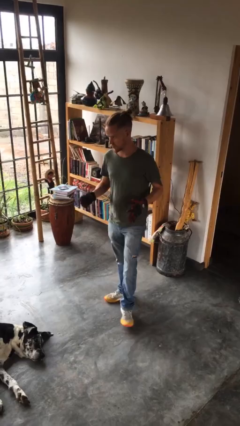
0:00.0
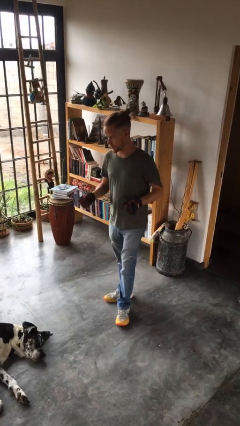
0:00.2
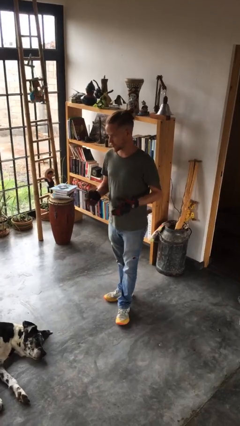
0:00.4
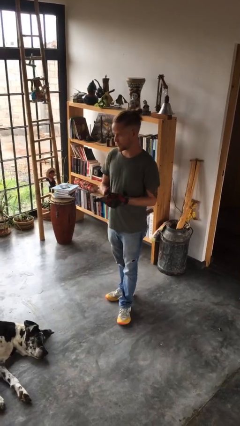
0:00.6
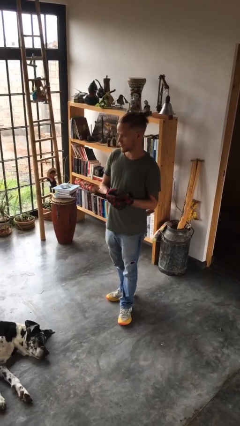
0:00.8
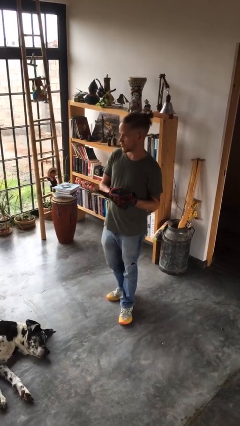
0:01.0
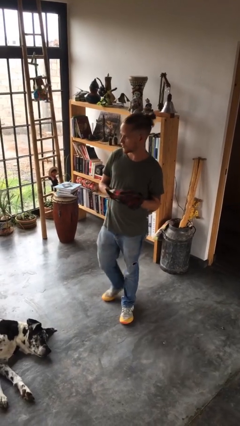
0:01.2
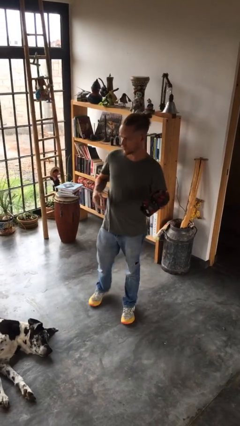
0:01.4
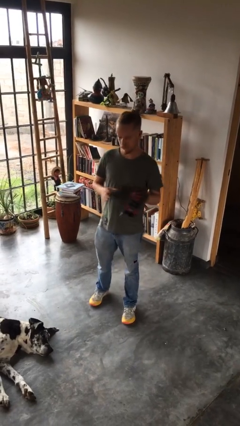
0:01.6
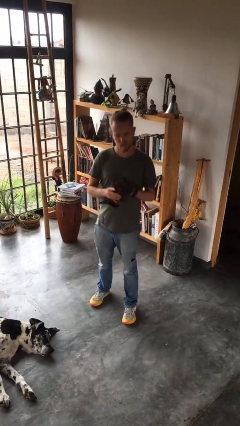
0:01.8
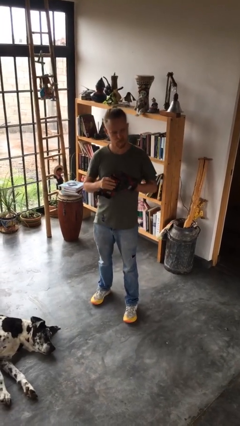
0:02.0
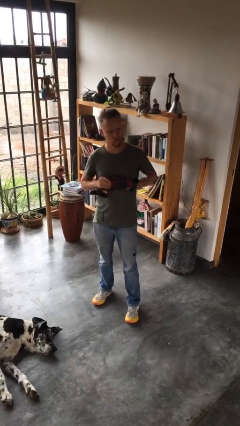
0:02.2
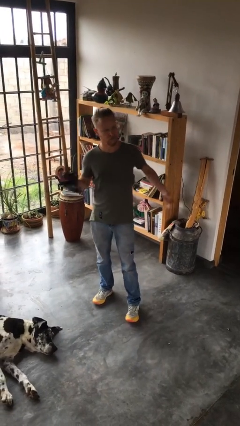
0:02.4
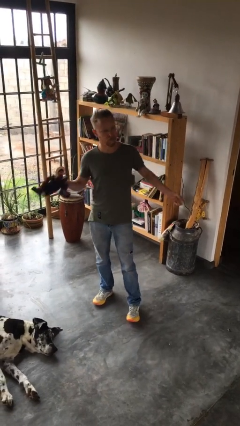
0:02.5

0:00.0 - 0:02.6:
person takes off gloves

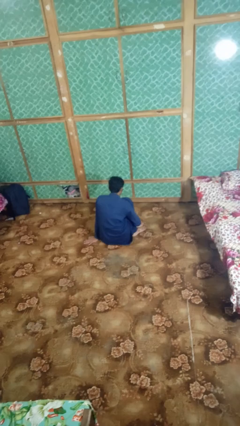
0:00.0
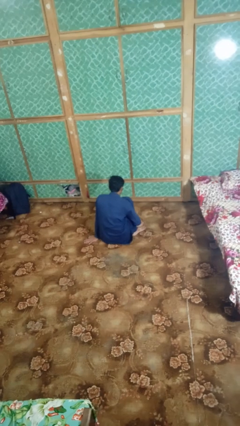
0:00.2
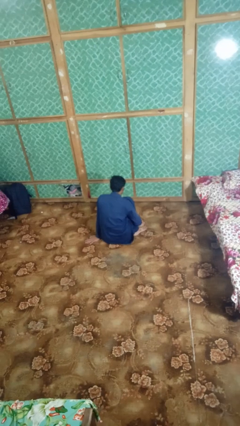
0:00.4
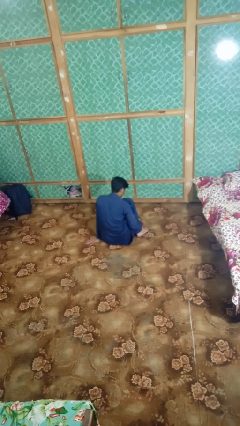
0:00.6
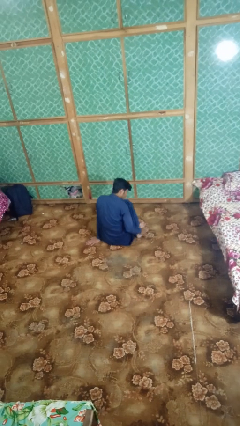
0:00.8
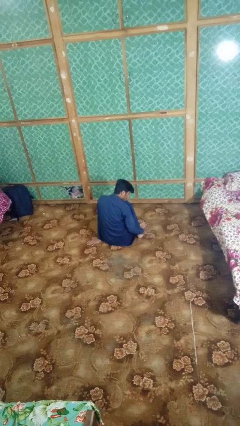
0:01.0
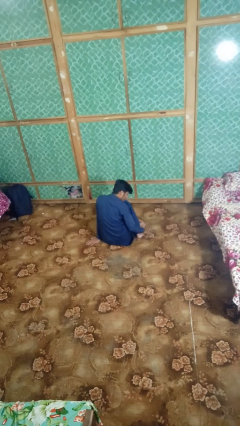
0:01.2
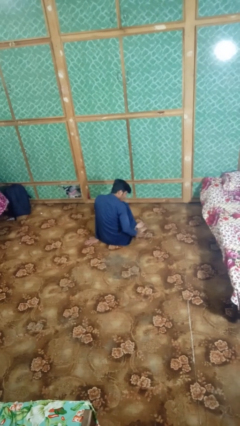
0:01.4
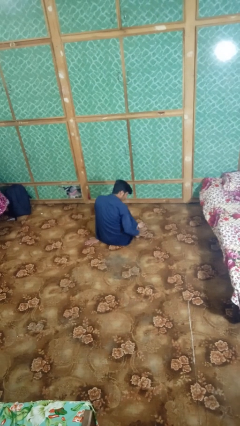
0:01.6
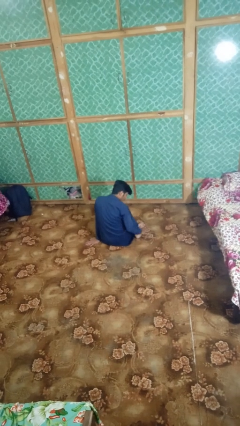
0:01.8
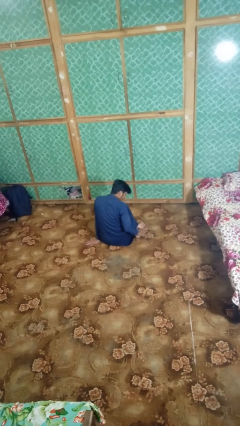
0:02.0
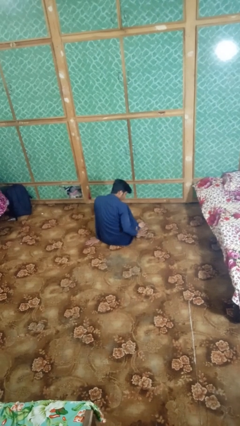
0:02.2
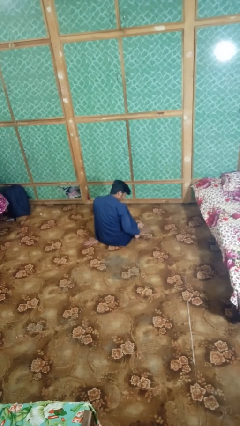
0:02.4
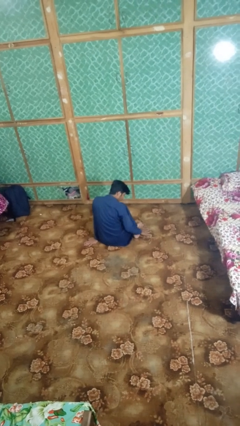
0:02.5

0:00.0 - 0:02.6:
person rubs foot

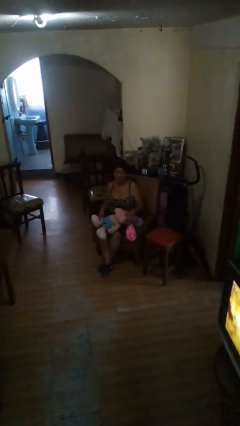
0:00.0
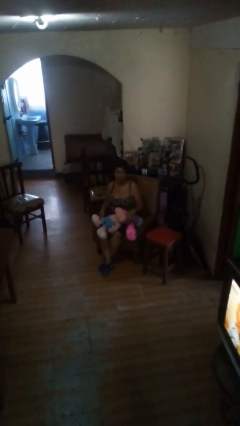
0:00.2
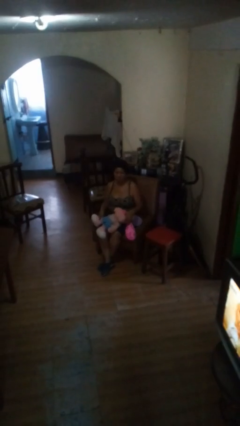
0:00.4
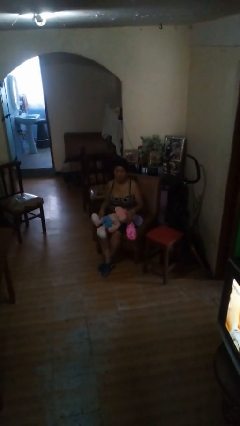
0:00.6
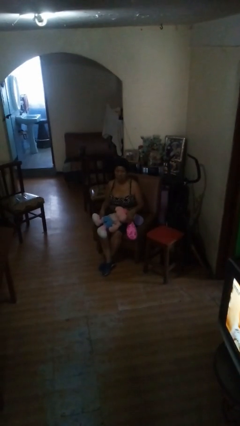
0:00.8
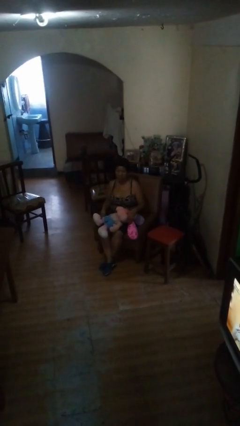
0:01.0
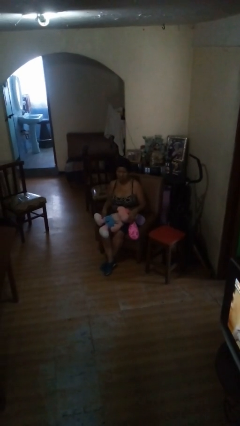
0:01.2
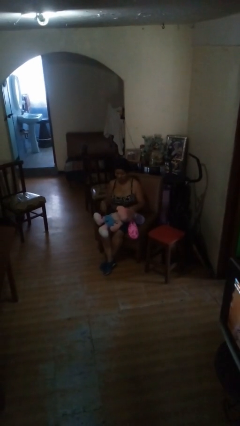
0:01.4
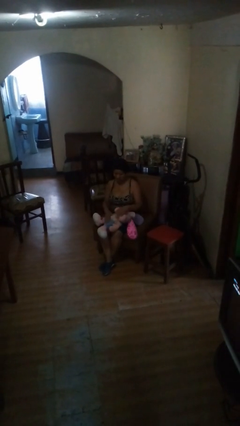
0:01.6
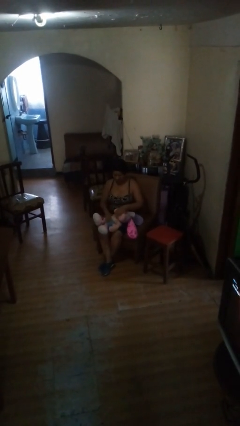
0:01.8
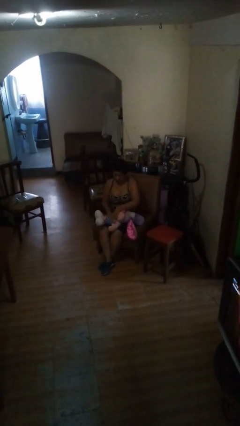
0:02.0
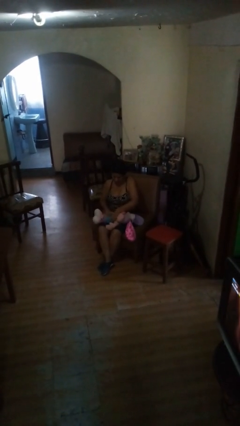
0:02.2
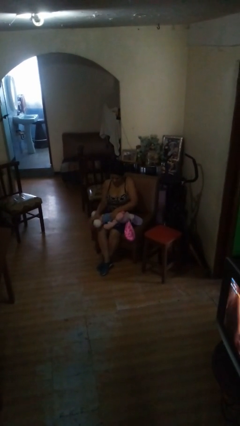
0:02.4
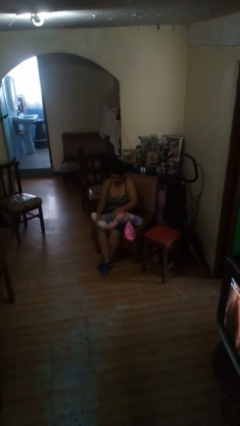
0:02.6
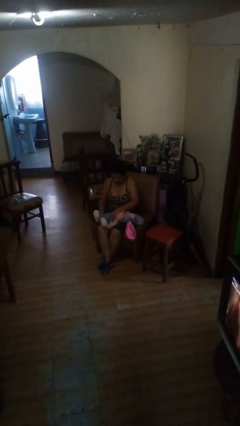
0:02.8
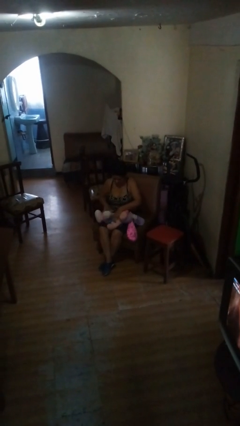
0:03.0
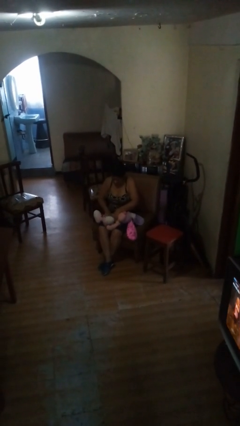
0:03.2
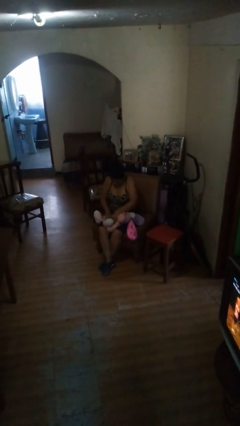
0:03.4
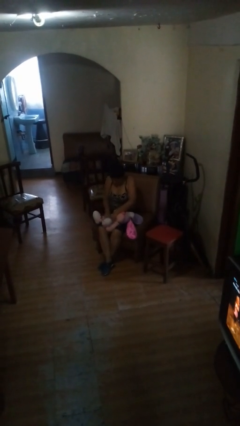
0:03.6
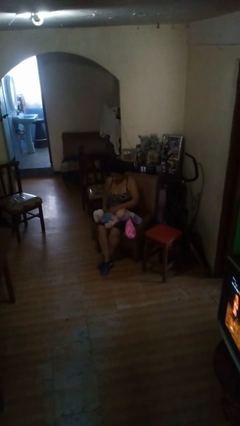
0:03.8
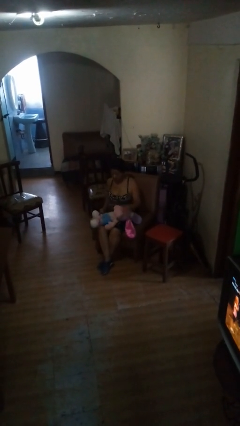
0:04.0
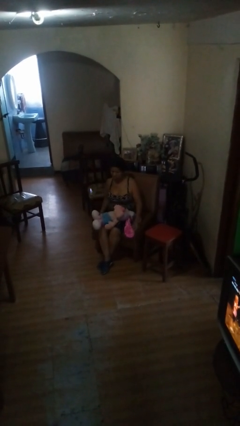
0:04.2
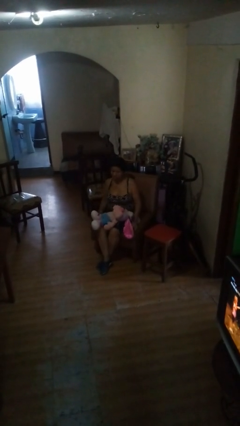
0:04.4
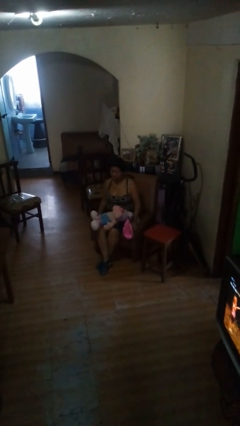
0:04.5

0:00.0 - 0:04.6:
person squeezes object

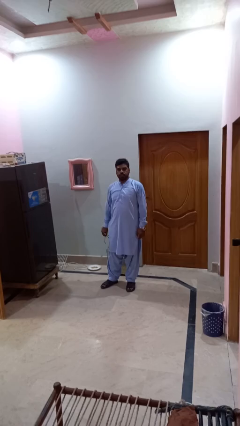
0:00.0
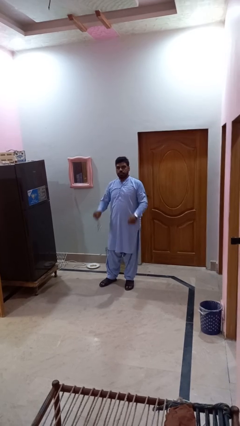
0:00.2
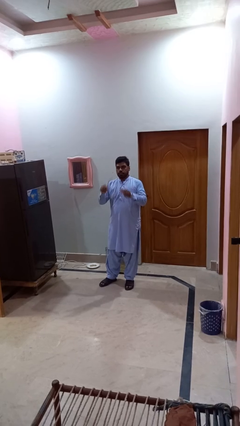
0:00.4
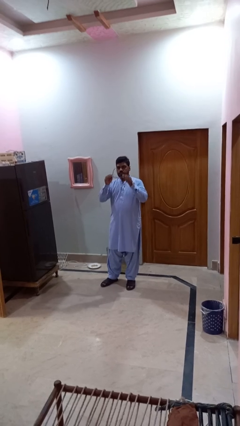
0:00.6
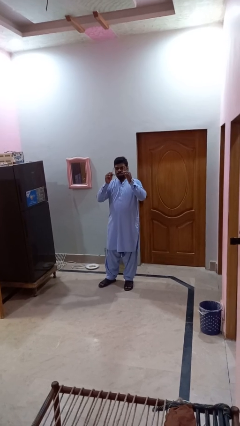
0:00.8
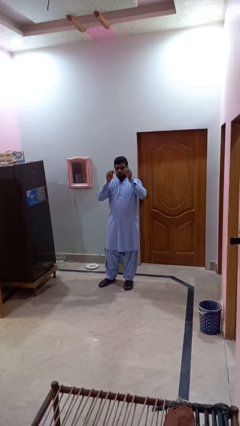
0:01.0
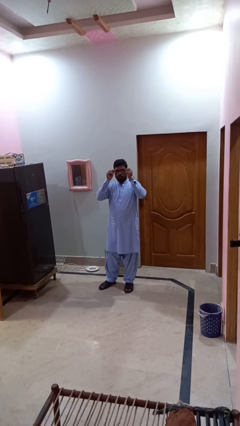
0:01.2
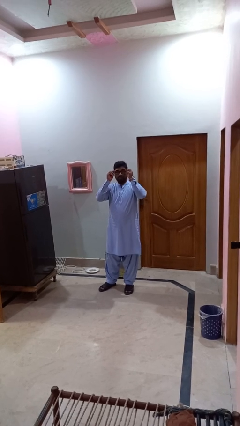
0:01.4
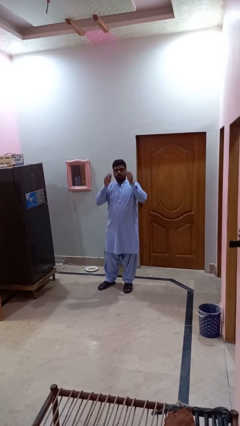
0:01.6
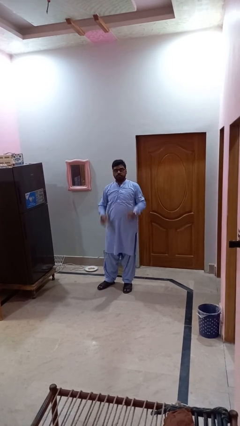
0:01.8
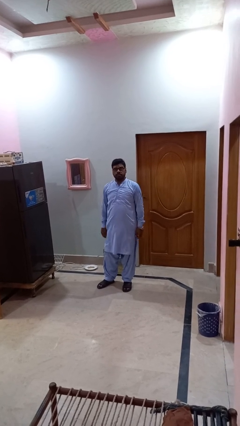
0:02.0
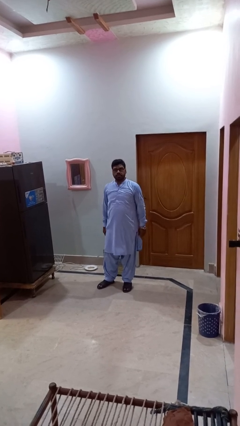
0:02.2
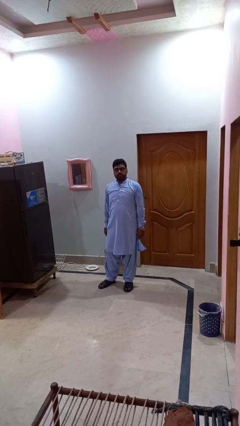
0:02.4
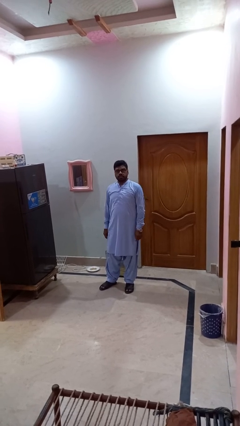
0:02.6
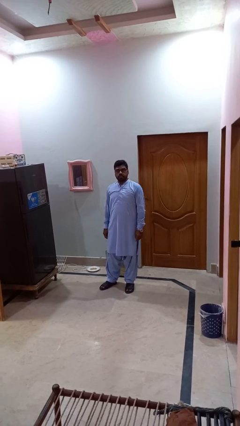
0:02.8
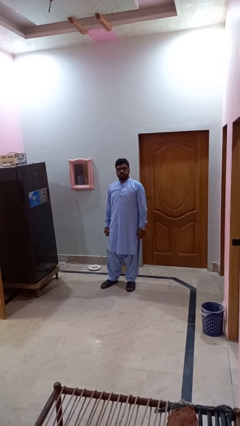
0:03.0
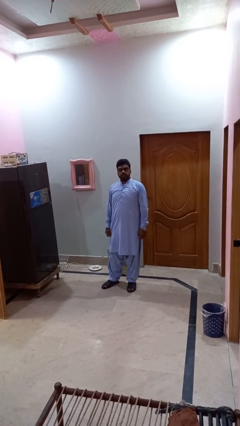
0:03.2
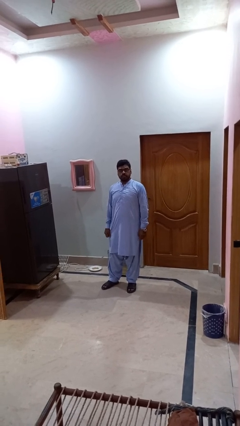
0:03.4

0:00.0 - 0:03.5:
person puts on glasses

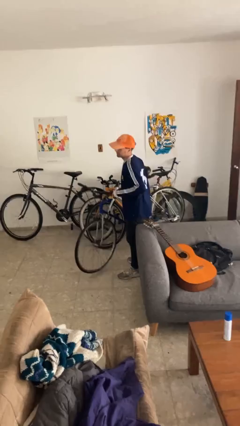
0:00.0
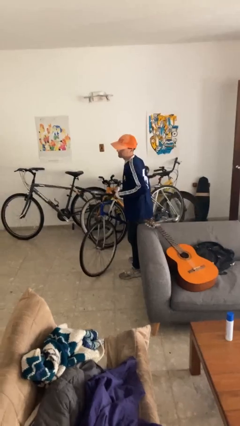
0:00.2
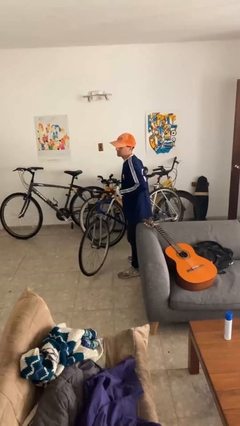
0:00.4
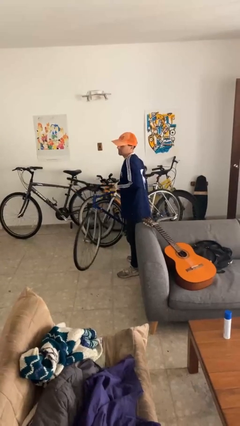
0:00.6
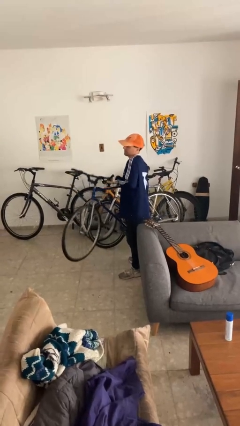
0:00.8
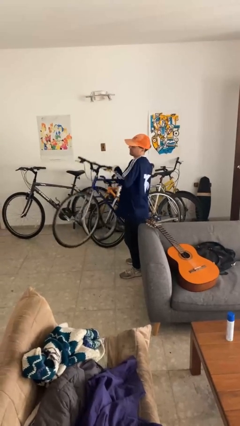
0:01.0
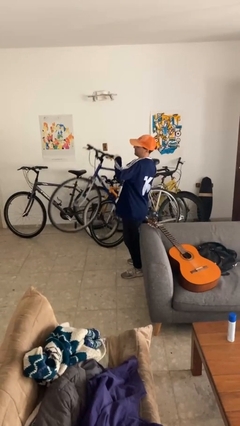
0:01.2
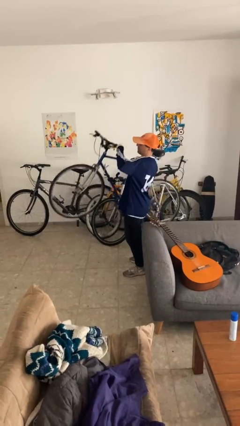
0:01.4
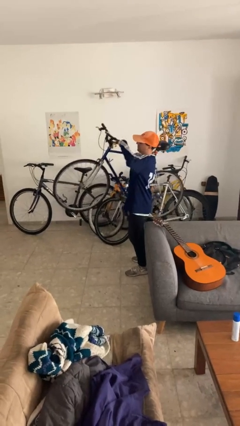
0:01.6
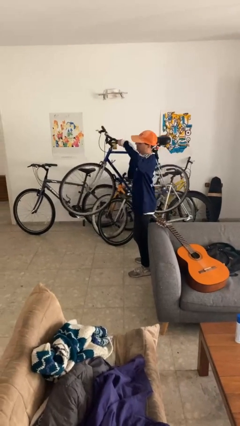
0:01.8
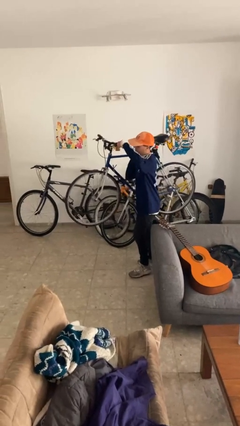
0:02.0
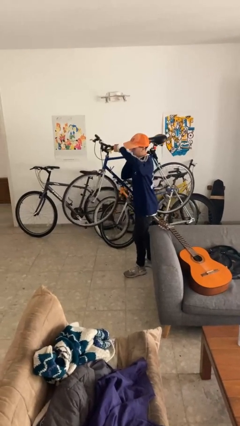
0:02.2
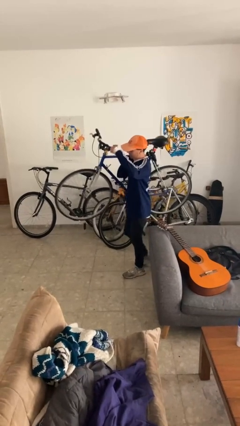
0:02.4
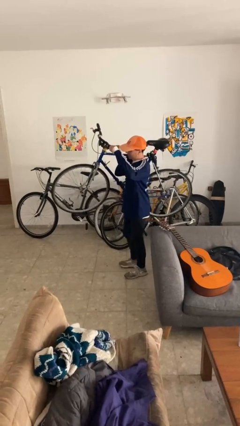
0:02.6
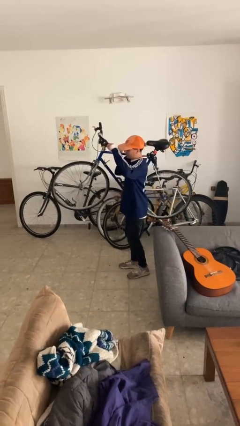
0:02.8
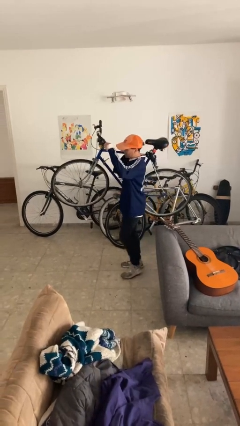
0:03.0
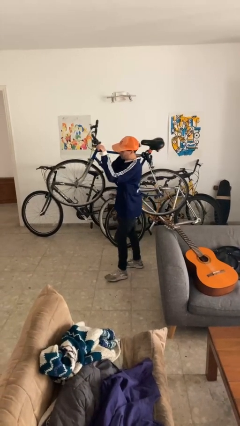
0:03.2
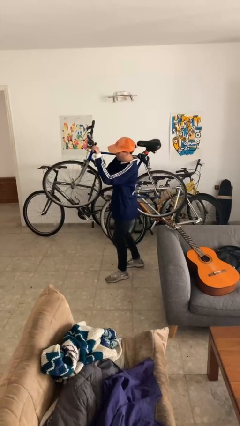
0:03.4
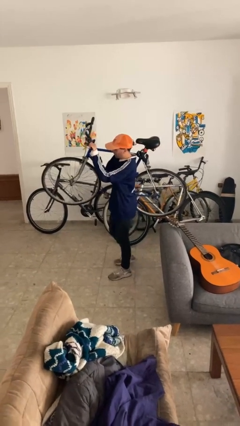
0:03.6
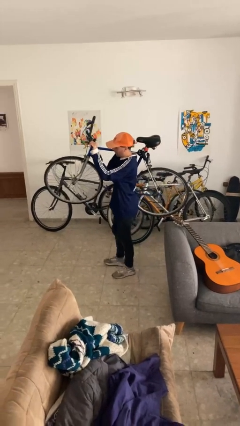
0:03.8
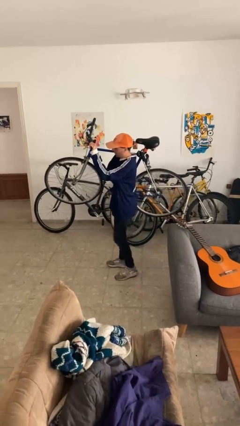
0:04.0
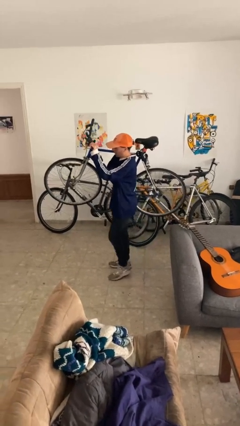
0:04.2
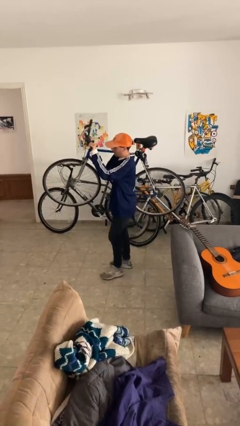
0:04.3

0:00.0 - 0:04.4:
person carries bicycle
